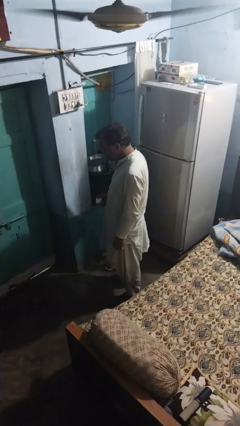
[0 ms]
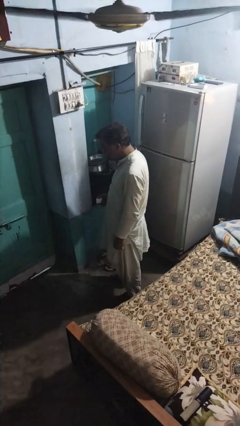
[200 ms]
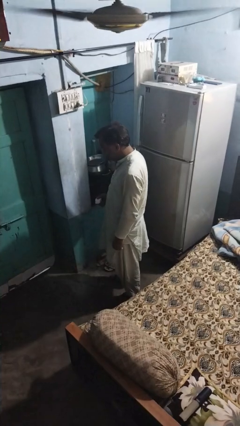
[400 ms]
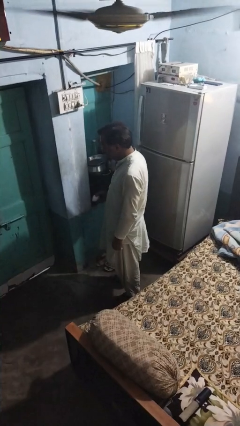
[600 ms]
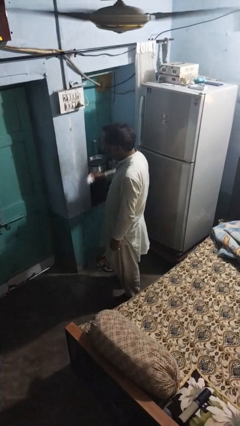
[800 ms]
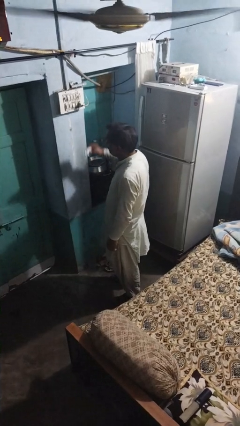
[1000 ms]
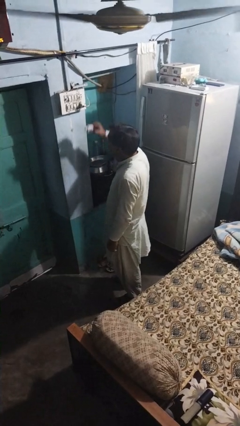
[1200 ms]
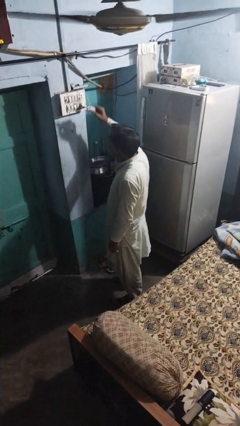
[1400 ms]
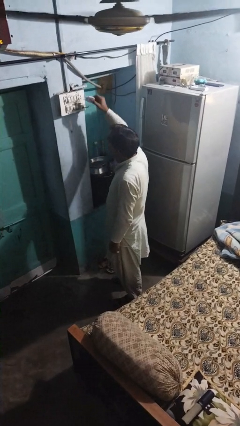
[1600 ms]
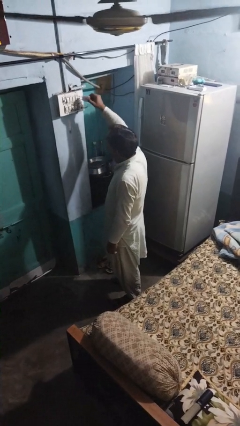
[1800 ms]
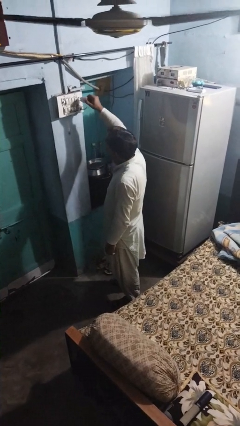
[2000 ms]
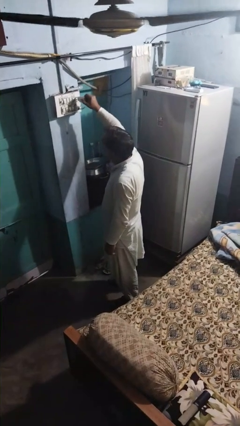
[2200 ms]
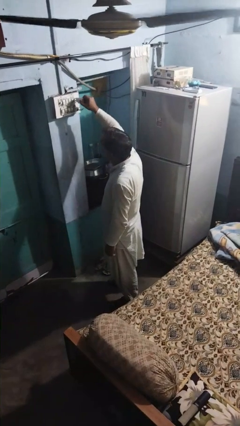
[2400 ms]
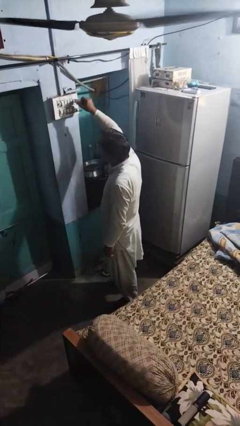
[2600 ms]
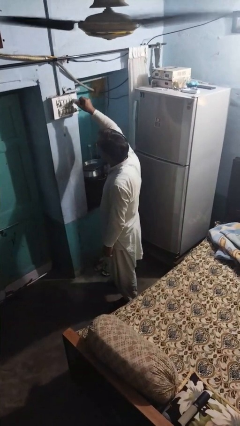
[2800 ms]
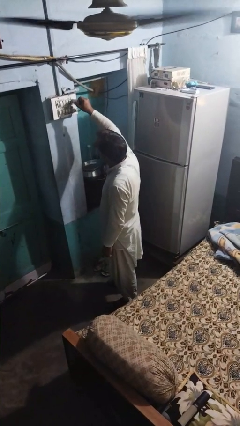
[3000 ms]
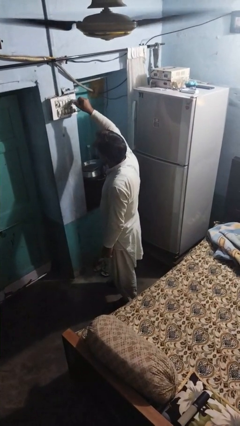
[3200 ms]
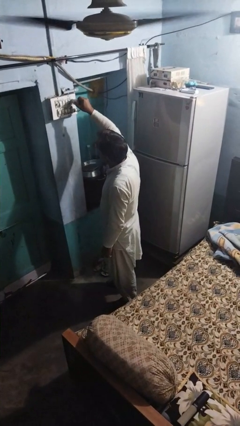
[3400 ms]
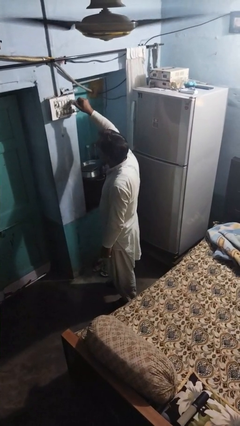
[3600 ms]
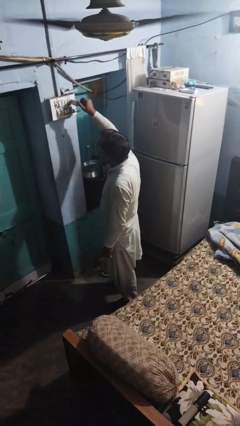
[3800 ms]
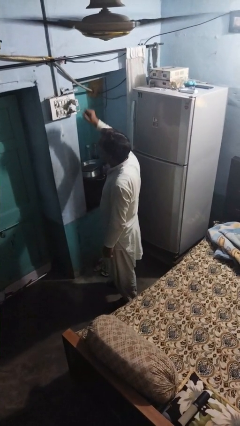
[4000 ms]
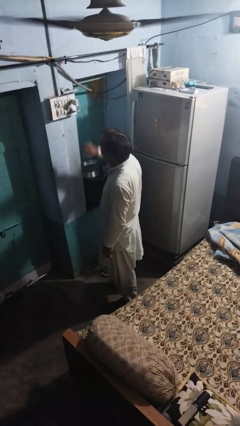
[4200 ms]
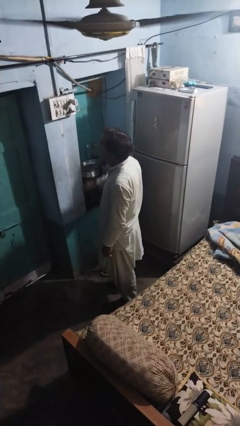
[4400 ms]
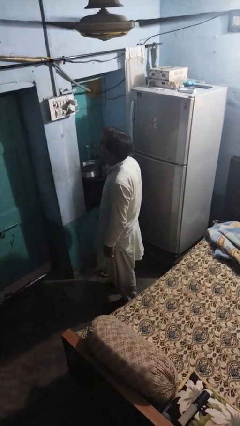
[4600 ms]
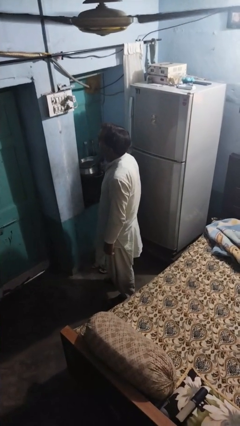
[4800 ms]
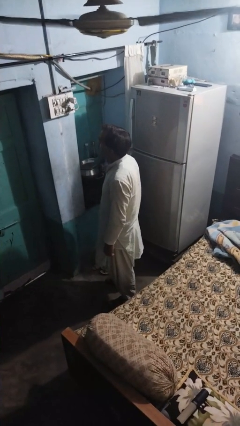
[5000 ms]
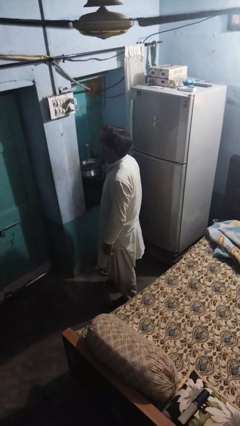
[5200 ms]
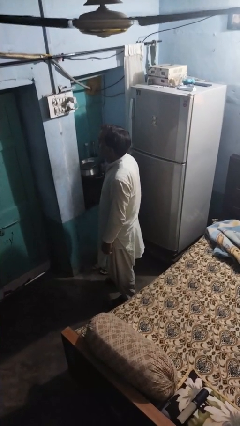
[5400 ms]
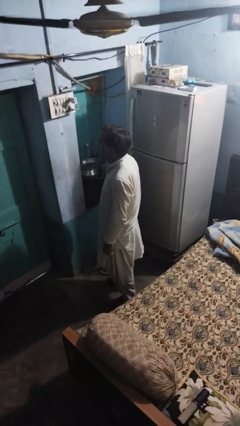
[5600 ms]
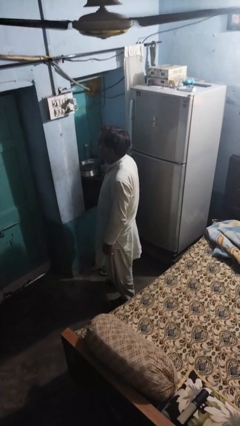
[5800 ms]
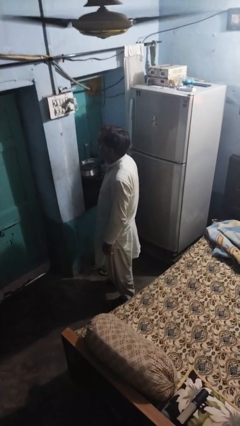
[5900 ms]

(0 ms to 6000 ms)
person plugs into electrical socket

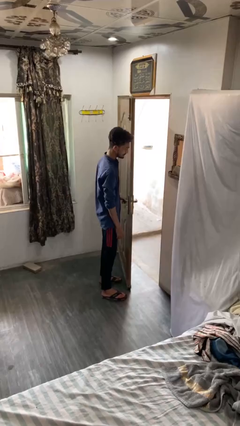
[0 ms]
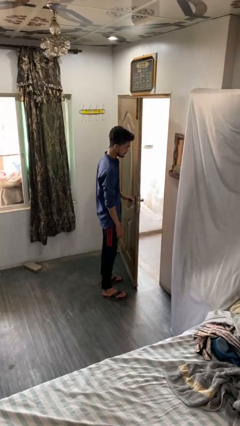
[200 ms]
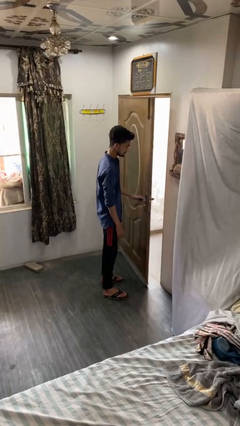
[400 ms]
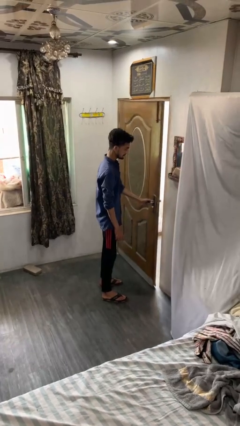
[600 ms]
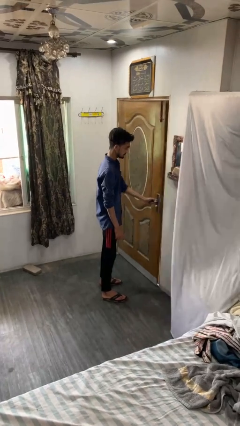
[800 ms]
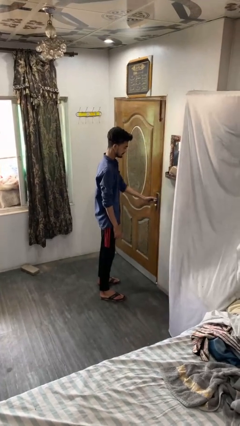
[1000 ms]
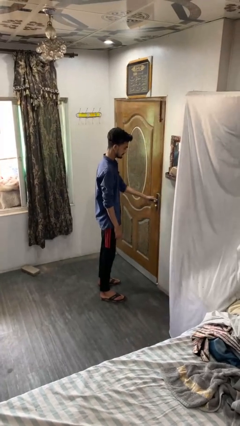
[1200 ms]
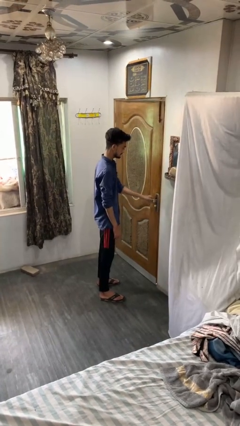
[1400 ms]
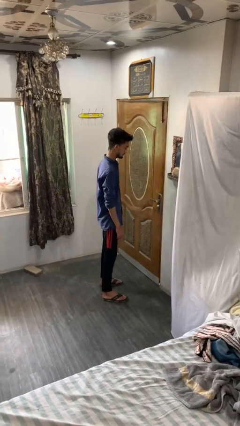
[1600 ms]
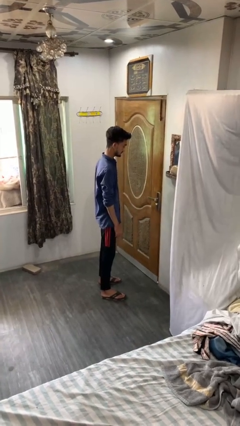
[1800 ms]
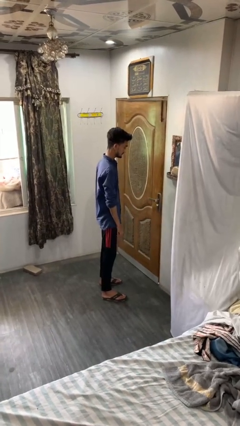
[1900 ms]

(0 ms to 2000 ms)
person closes facility door

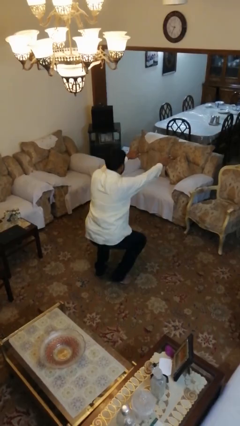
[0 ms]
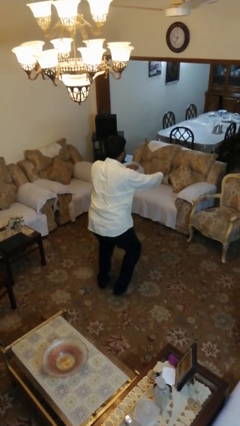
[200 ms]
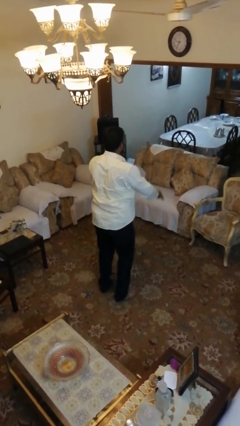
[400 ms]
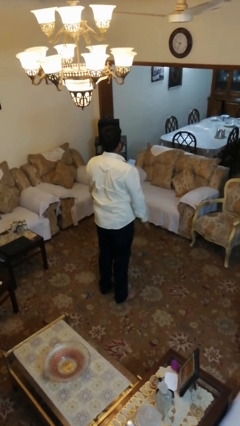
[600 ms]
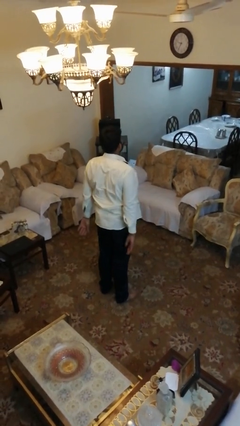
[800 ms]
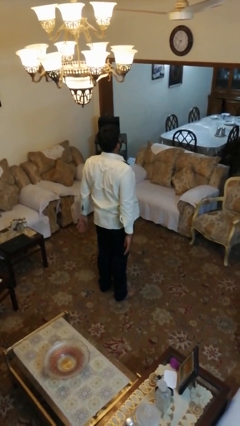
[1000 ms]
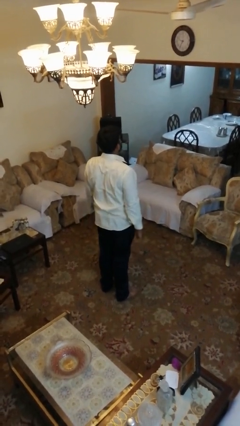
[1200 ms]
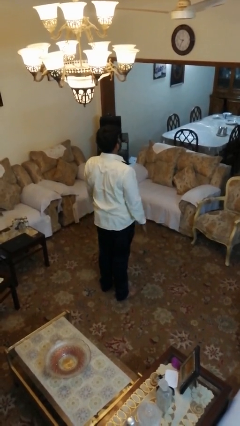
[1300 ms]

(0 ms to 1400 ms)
person stands up

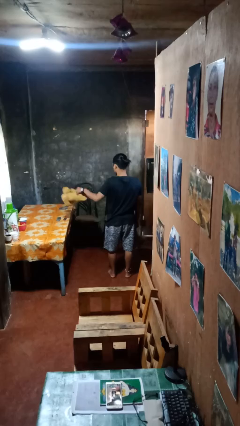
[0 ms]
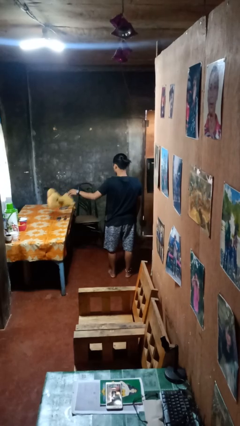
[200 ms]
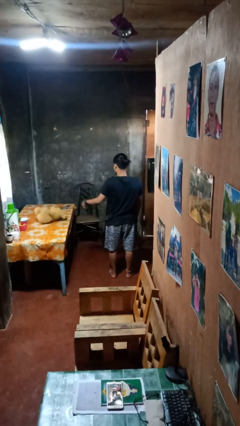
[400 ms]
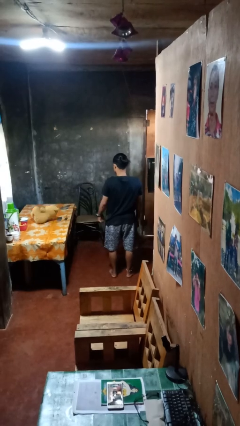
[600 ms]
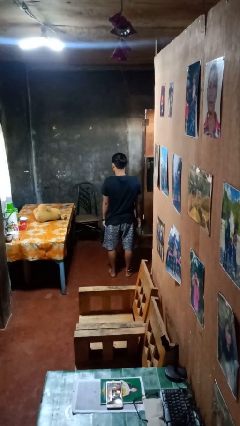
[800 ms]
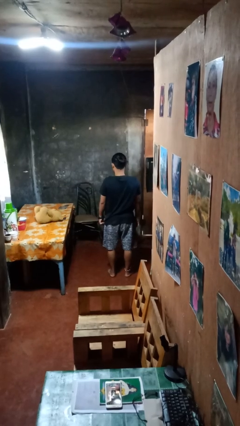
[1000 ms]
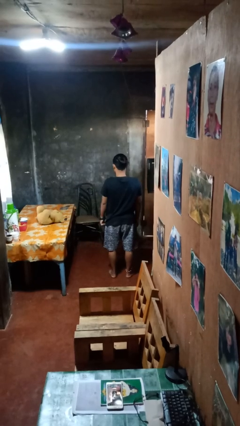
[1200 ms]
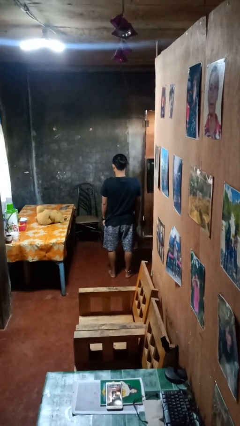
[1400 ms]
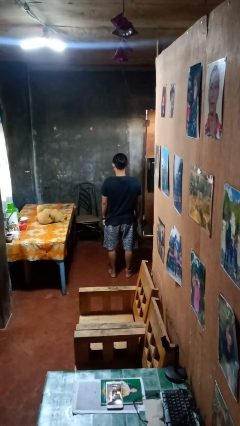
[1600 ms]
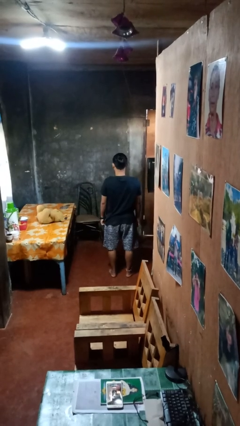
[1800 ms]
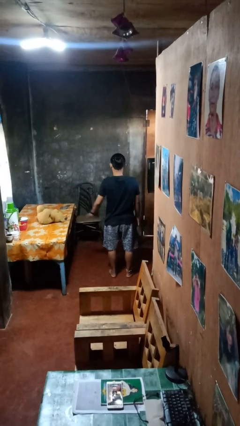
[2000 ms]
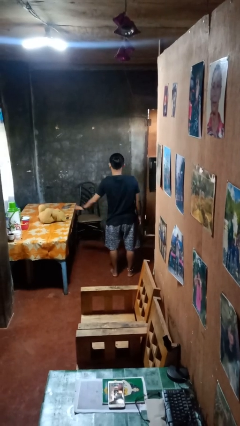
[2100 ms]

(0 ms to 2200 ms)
person throws object on table

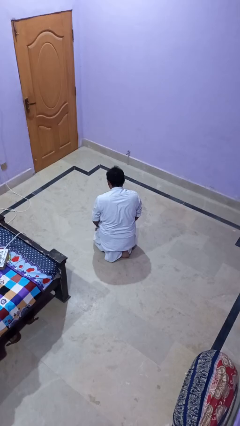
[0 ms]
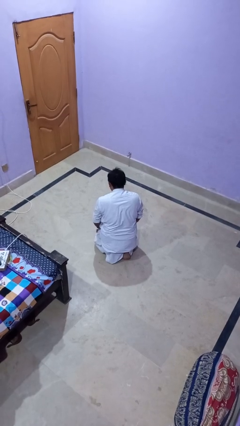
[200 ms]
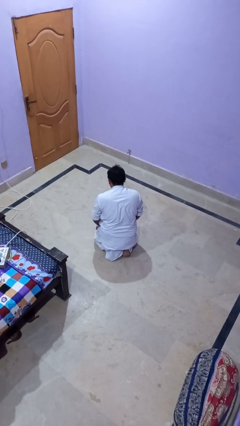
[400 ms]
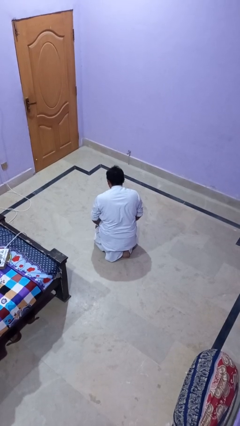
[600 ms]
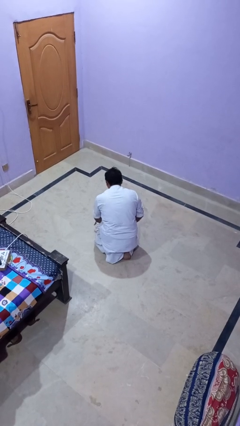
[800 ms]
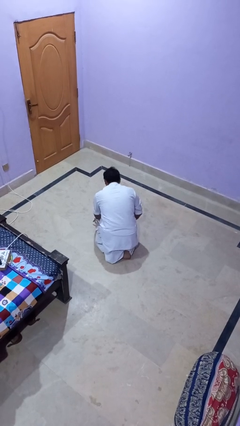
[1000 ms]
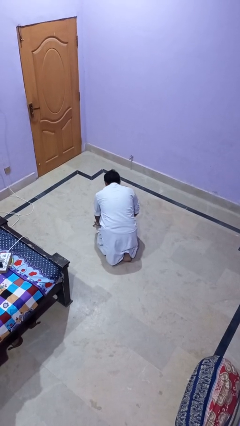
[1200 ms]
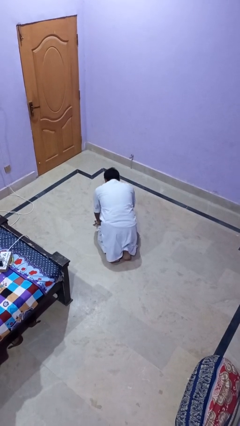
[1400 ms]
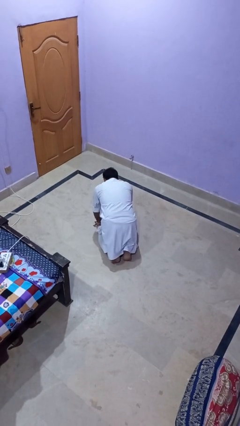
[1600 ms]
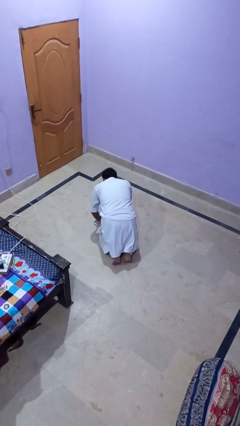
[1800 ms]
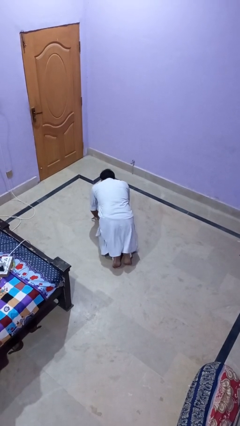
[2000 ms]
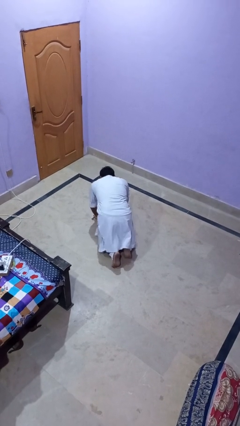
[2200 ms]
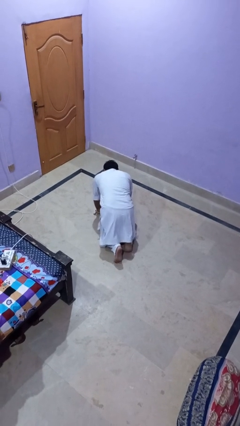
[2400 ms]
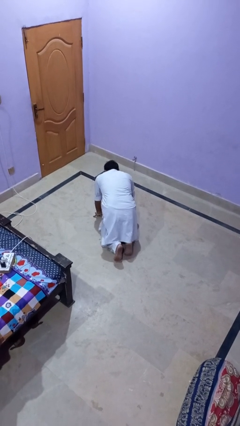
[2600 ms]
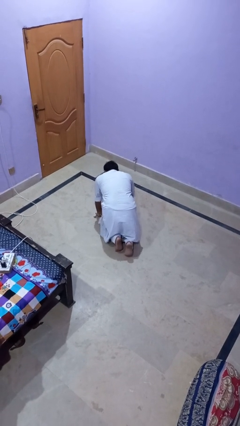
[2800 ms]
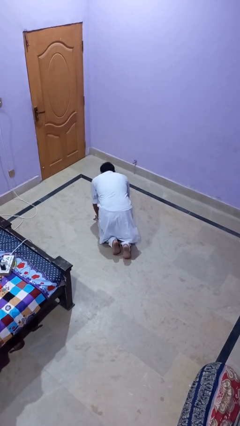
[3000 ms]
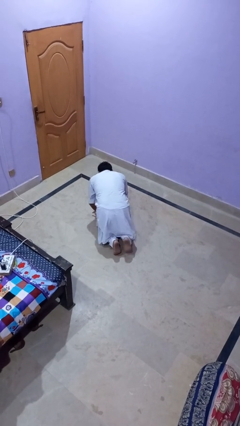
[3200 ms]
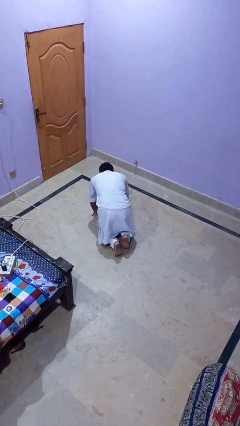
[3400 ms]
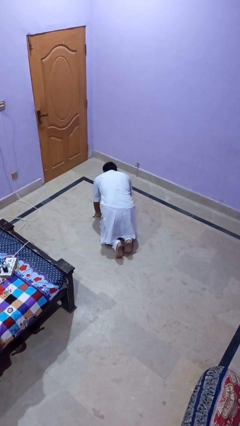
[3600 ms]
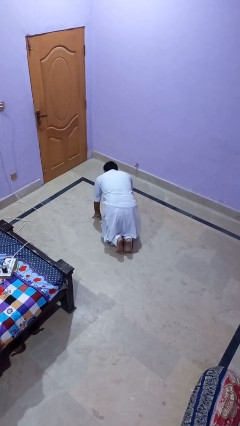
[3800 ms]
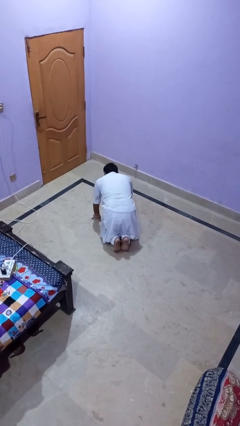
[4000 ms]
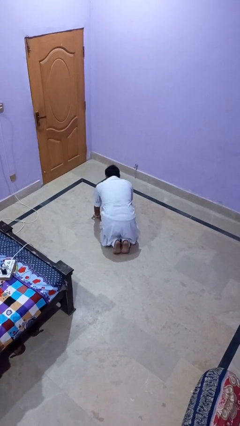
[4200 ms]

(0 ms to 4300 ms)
person crawls

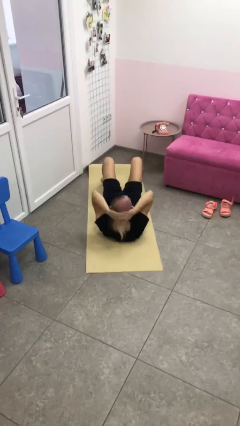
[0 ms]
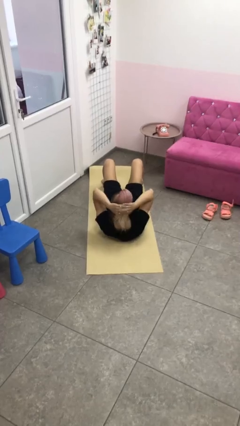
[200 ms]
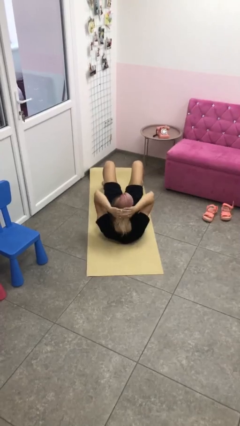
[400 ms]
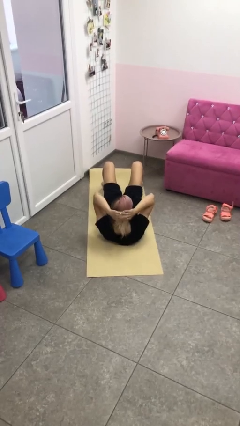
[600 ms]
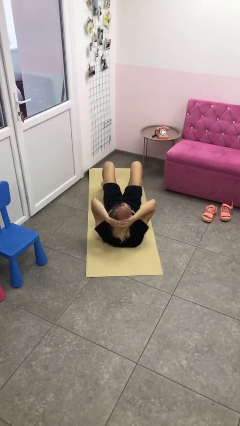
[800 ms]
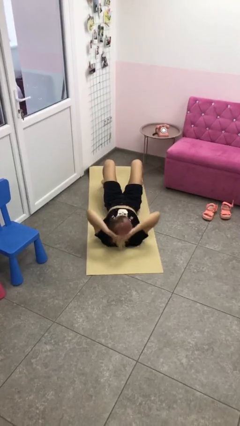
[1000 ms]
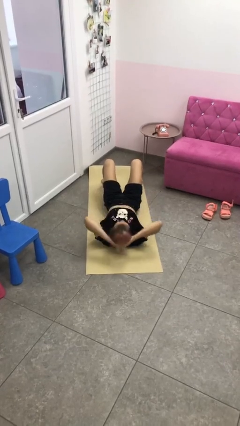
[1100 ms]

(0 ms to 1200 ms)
person exercises with situp

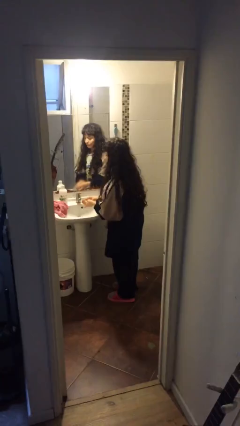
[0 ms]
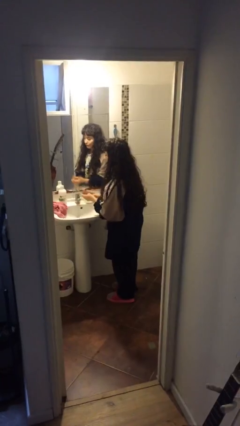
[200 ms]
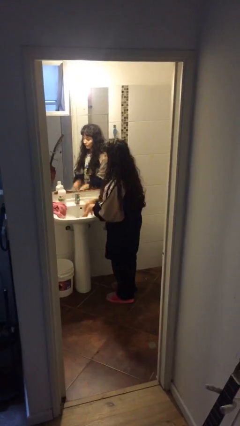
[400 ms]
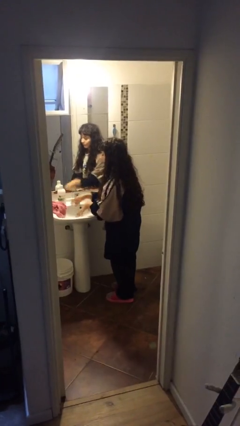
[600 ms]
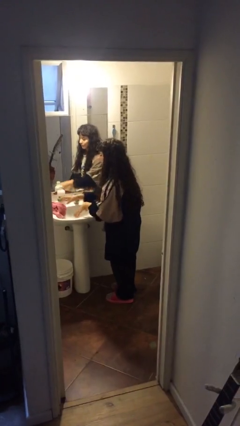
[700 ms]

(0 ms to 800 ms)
person dries hands with towel
